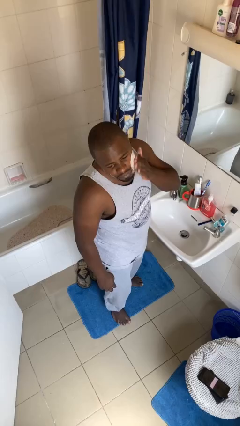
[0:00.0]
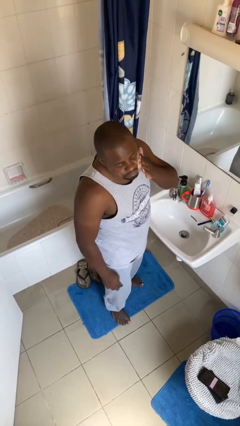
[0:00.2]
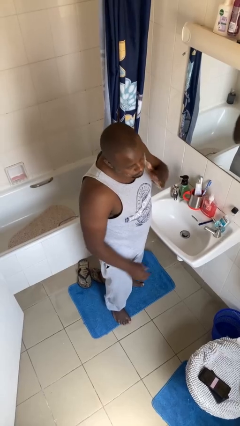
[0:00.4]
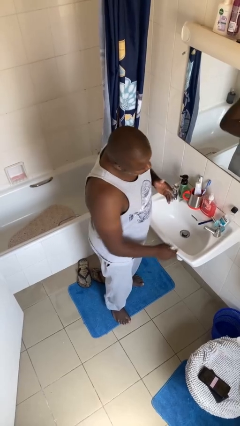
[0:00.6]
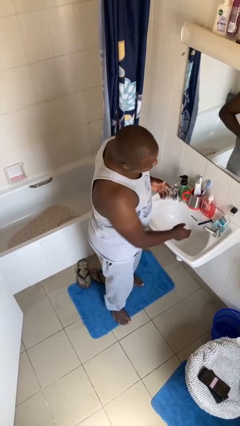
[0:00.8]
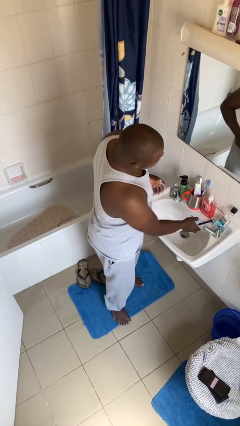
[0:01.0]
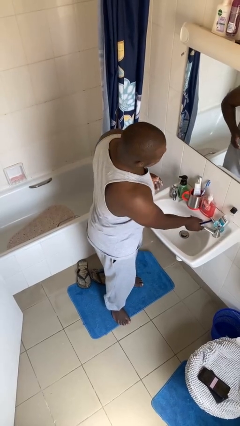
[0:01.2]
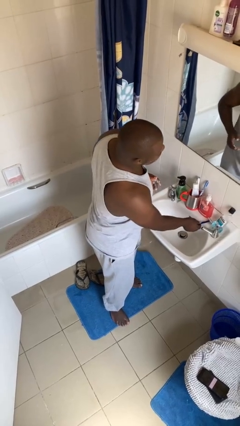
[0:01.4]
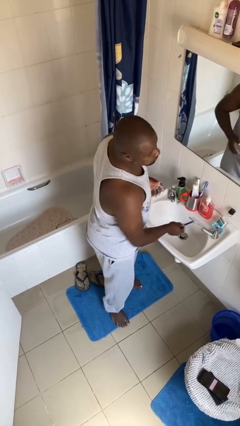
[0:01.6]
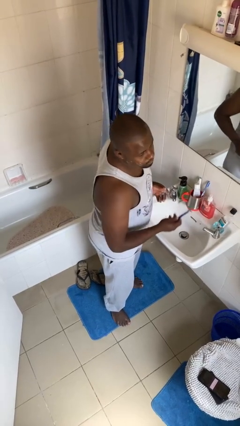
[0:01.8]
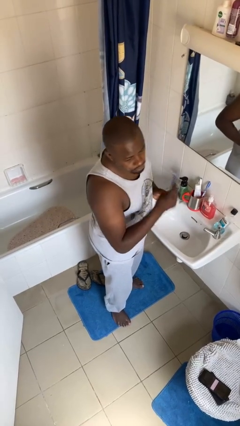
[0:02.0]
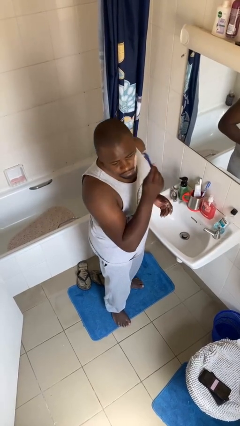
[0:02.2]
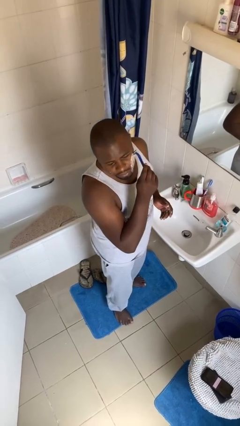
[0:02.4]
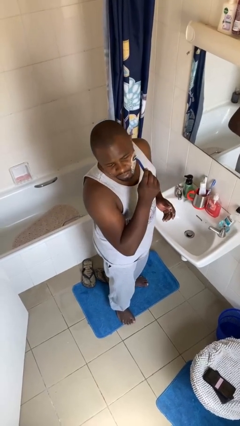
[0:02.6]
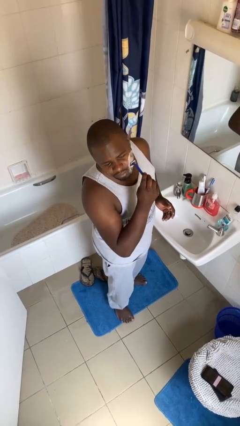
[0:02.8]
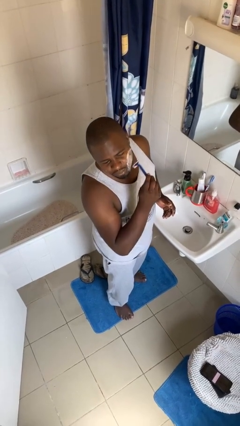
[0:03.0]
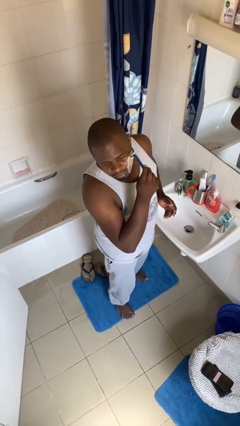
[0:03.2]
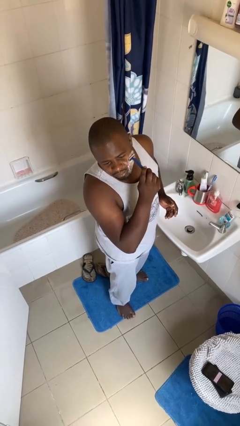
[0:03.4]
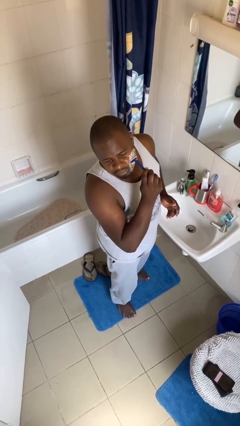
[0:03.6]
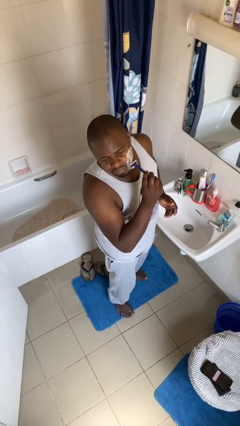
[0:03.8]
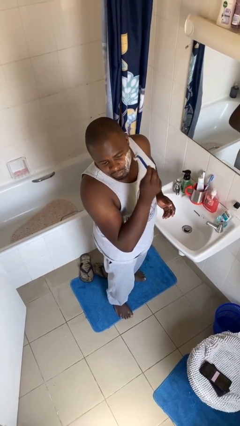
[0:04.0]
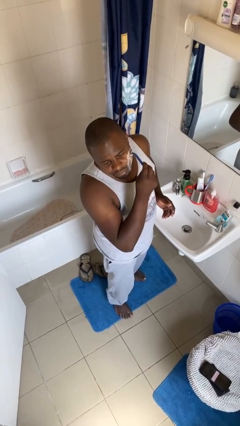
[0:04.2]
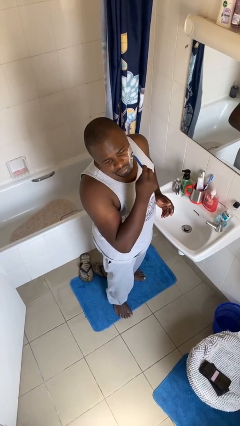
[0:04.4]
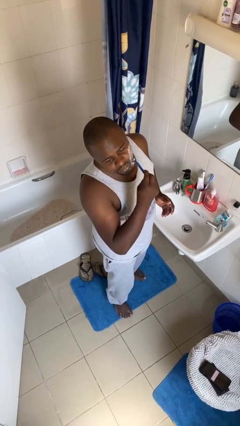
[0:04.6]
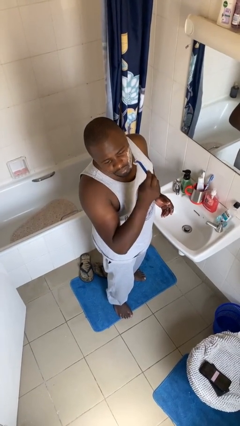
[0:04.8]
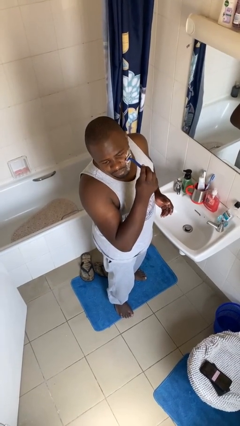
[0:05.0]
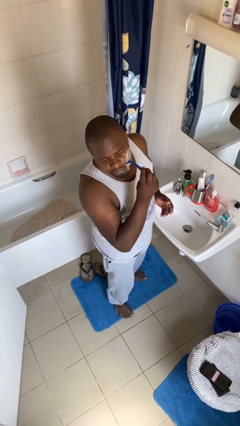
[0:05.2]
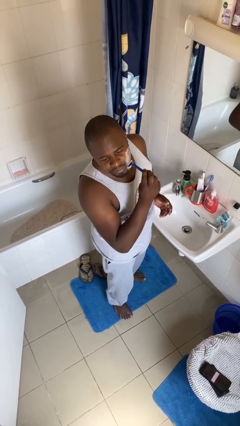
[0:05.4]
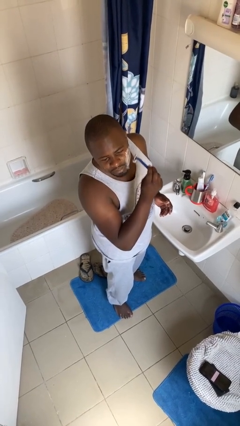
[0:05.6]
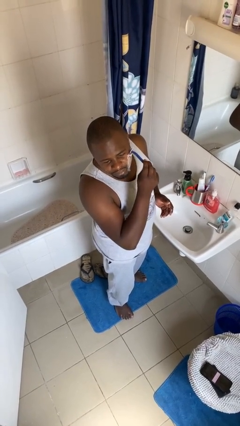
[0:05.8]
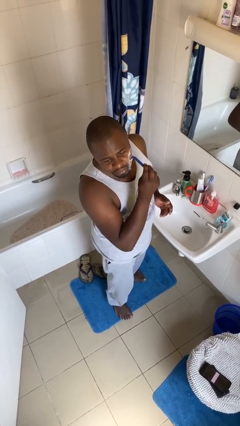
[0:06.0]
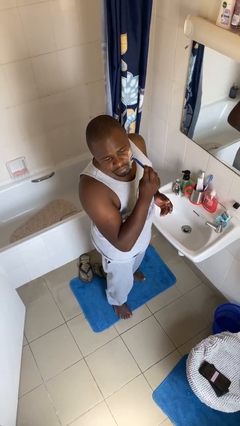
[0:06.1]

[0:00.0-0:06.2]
person shaves face

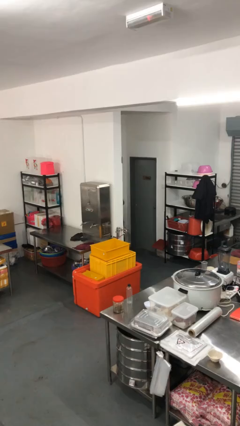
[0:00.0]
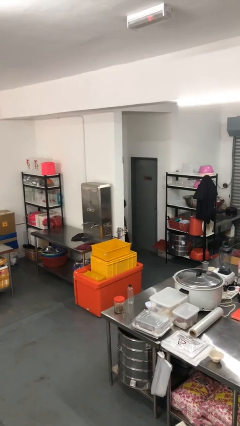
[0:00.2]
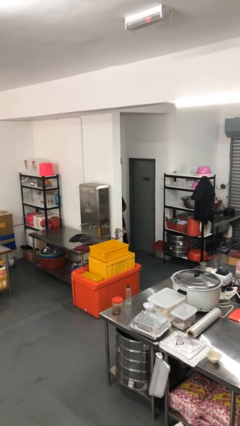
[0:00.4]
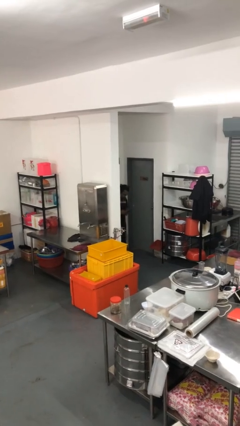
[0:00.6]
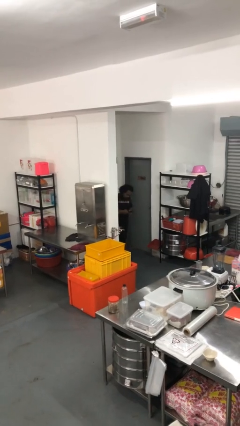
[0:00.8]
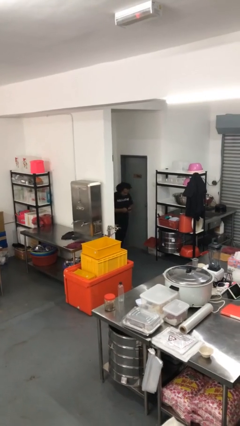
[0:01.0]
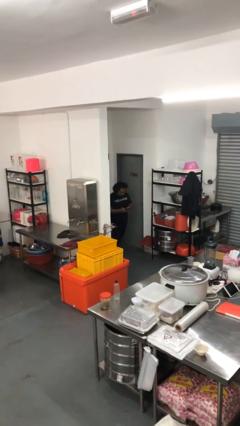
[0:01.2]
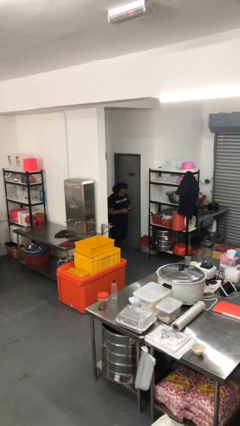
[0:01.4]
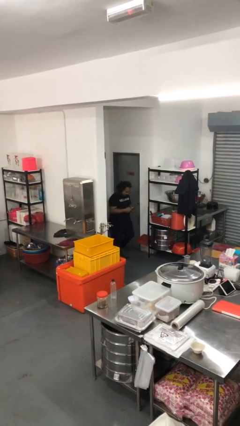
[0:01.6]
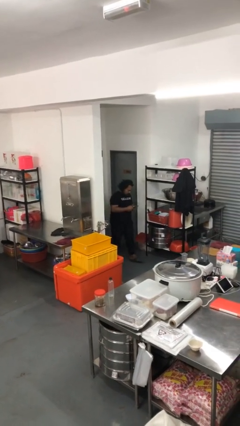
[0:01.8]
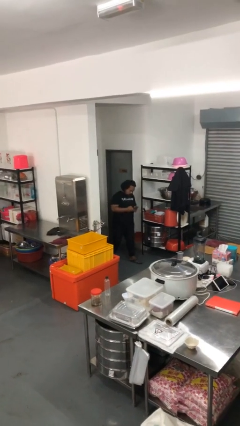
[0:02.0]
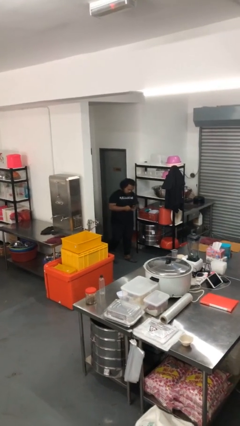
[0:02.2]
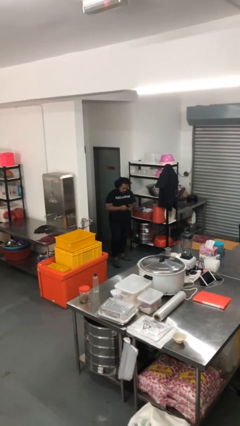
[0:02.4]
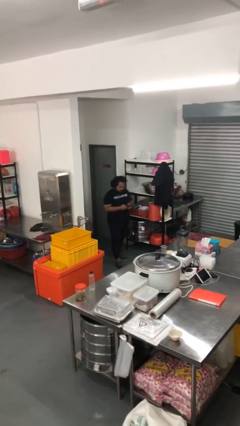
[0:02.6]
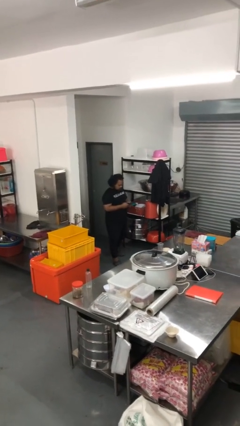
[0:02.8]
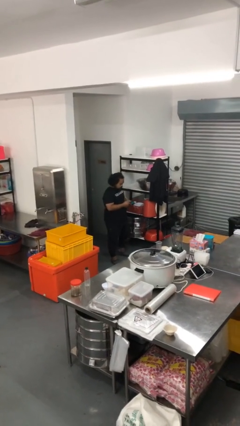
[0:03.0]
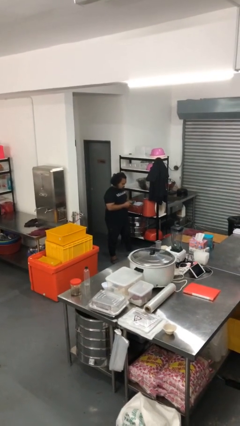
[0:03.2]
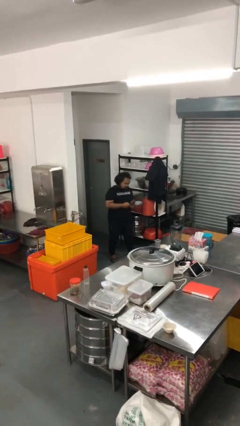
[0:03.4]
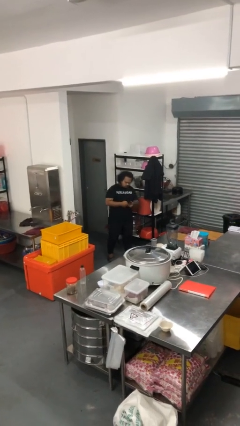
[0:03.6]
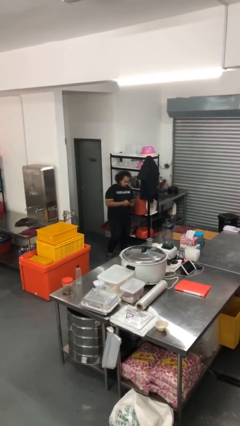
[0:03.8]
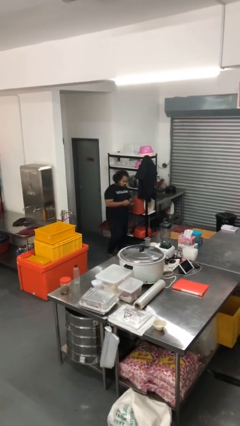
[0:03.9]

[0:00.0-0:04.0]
person enters scene through structure

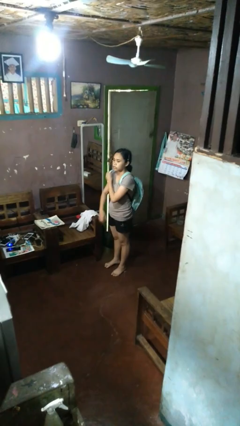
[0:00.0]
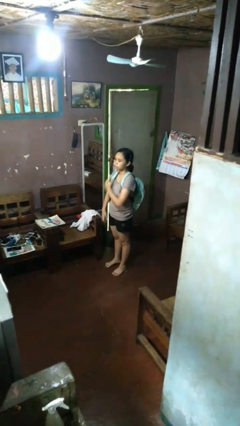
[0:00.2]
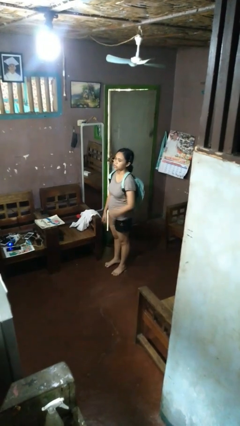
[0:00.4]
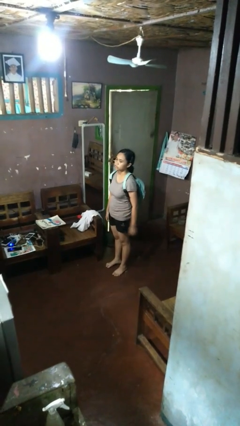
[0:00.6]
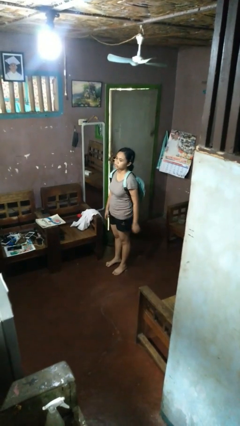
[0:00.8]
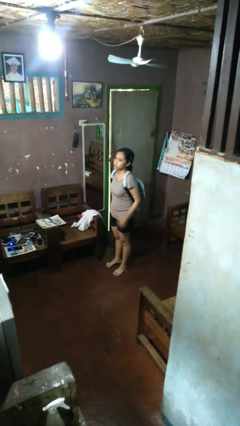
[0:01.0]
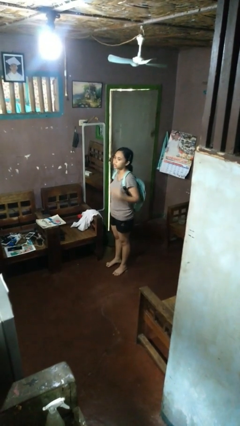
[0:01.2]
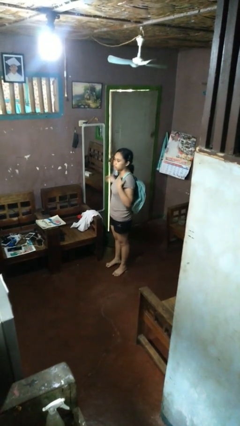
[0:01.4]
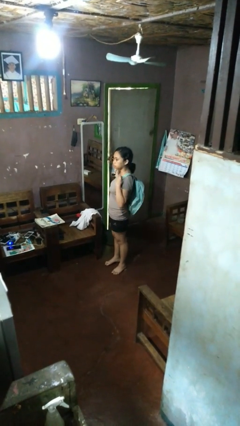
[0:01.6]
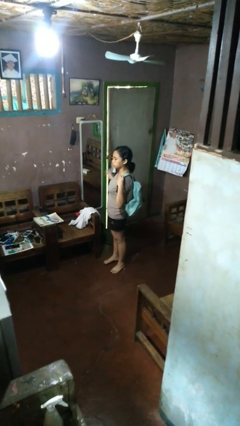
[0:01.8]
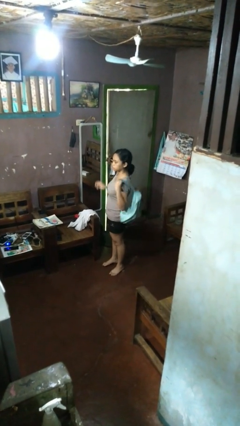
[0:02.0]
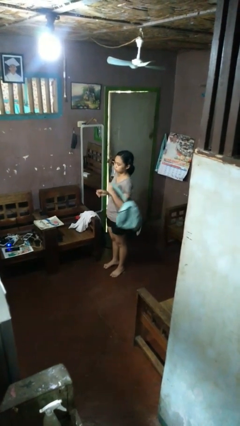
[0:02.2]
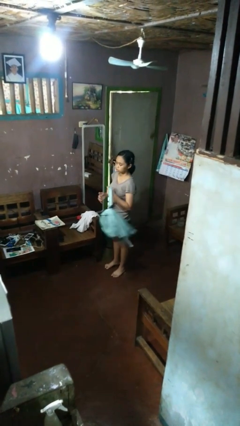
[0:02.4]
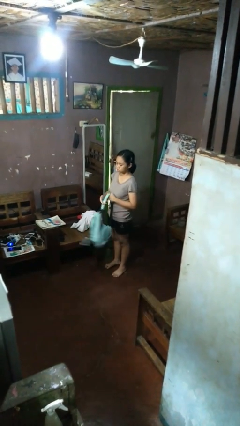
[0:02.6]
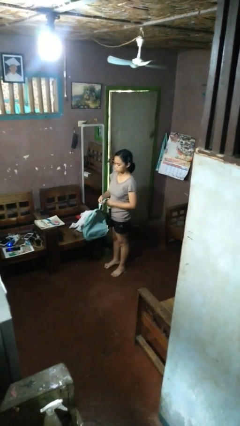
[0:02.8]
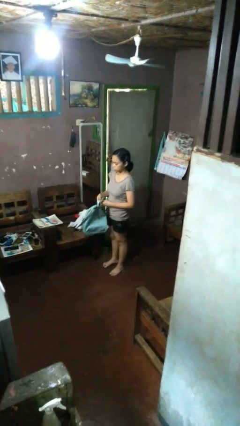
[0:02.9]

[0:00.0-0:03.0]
person takes off backpack

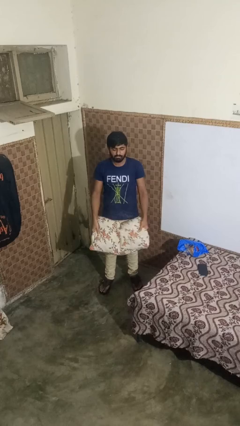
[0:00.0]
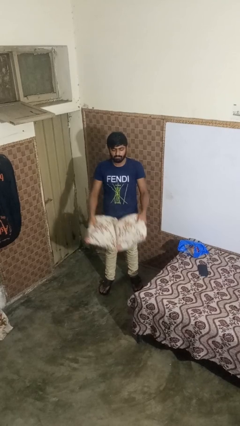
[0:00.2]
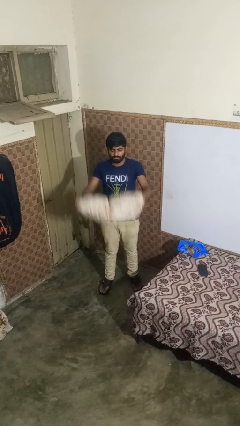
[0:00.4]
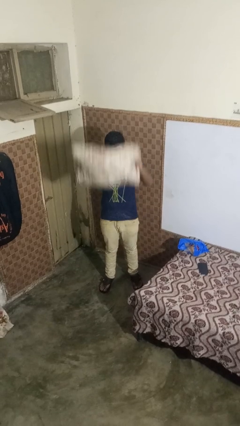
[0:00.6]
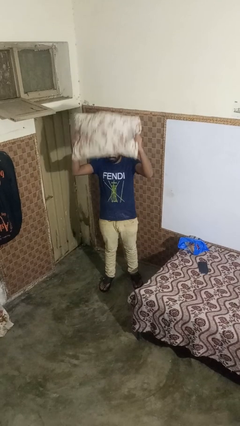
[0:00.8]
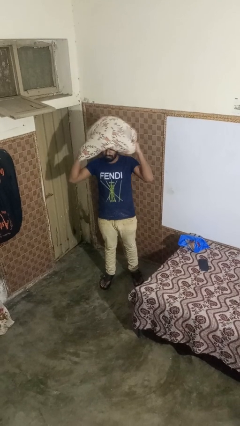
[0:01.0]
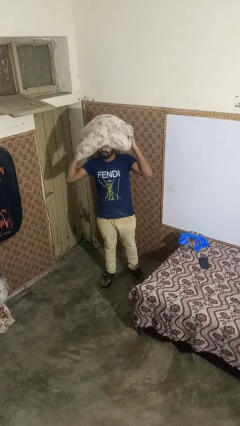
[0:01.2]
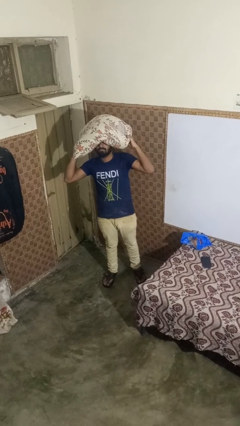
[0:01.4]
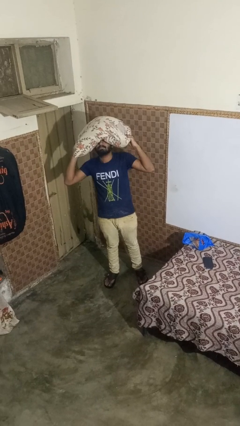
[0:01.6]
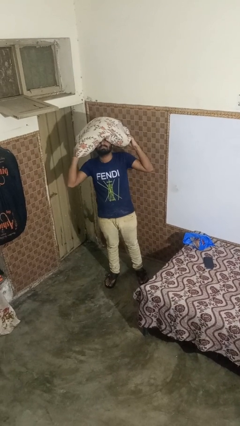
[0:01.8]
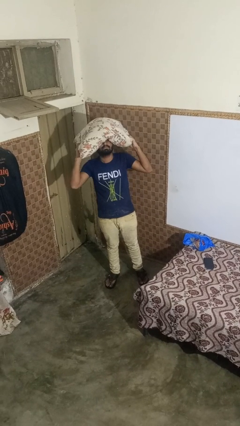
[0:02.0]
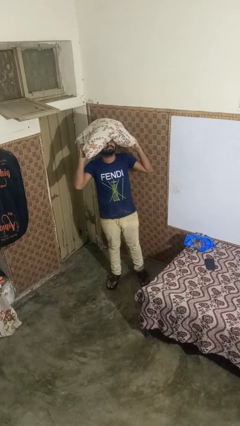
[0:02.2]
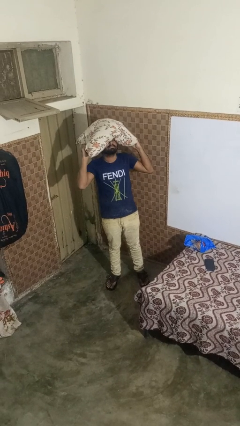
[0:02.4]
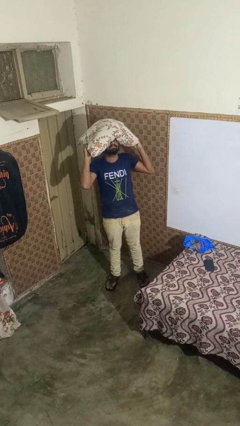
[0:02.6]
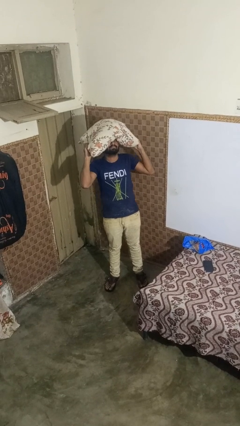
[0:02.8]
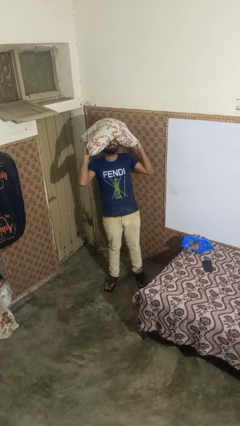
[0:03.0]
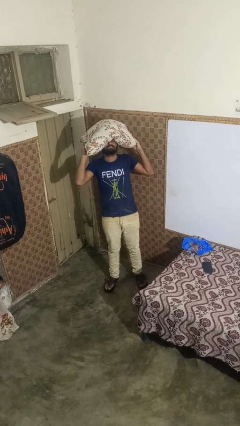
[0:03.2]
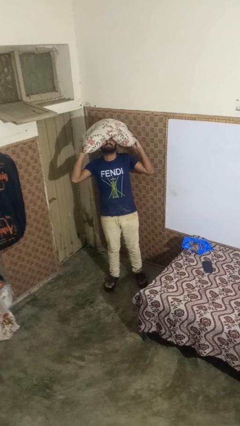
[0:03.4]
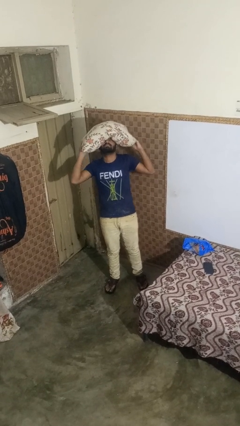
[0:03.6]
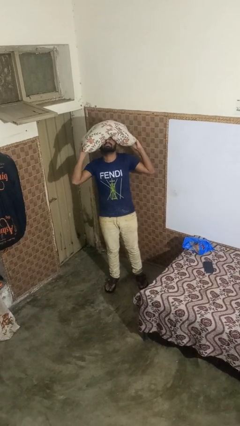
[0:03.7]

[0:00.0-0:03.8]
person holds object above head

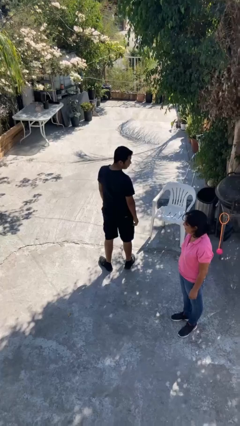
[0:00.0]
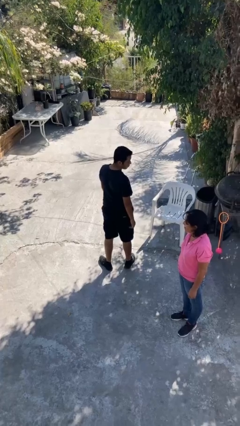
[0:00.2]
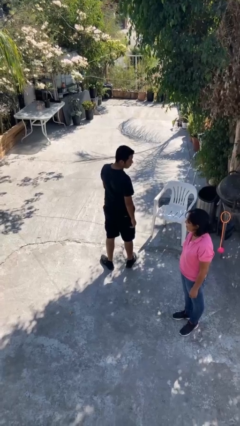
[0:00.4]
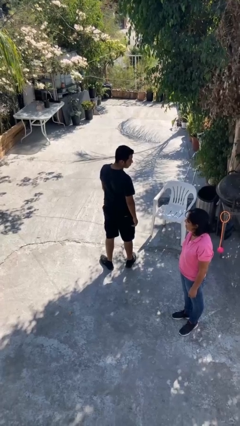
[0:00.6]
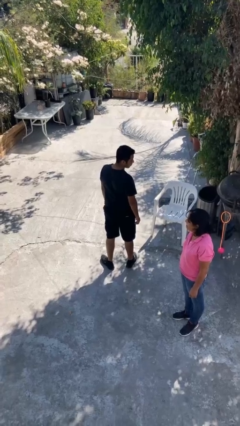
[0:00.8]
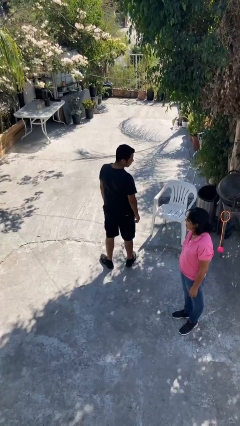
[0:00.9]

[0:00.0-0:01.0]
person looks over shoulder
